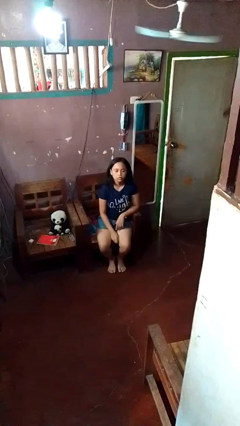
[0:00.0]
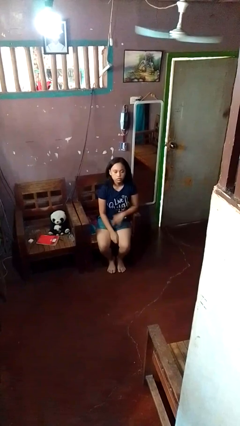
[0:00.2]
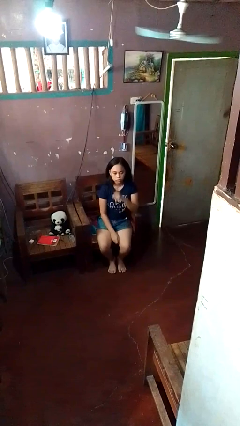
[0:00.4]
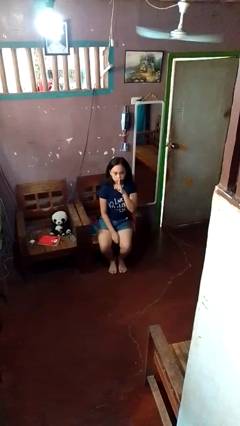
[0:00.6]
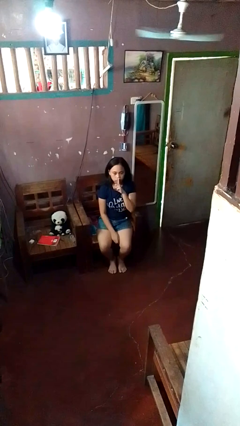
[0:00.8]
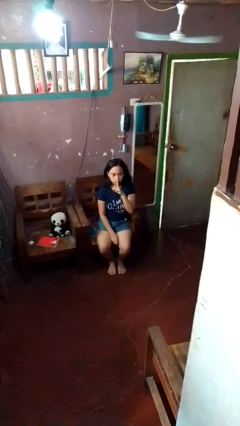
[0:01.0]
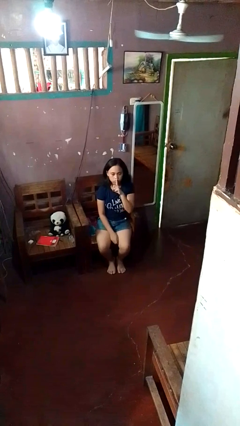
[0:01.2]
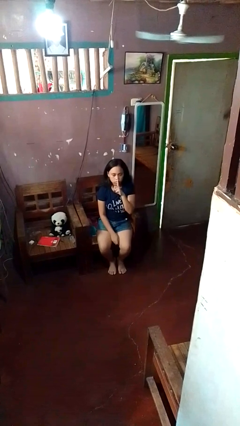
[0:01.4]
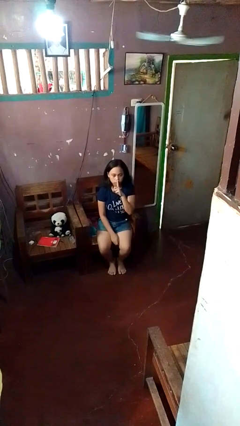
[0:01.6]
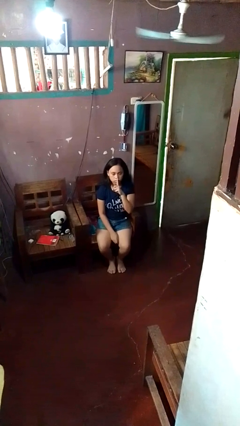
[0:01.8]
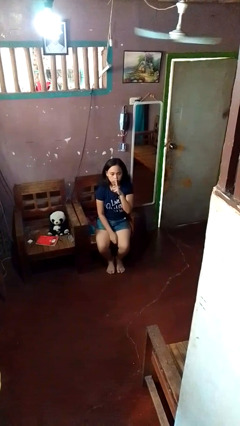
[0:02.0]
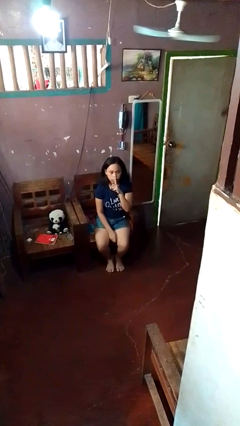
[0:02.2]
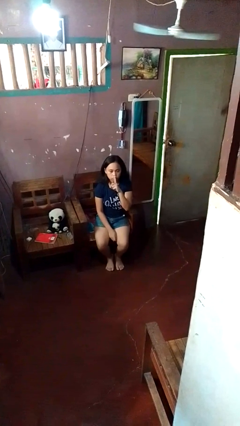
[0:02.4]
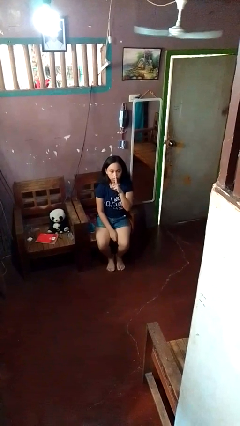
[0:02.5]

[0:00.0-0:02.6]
person gestures be quiet

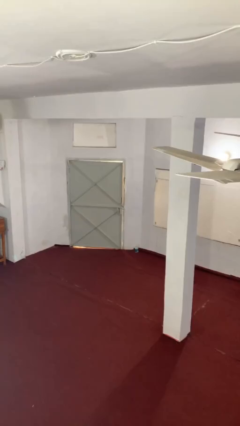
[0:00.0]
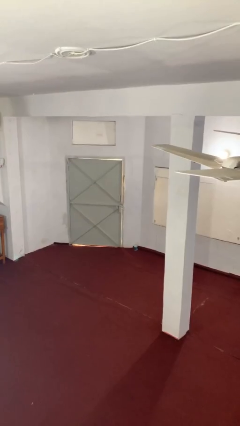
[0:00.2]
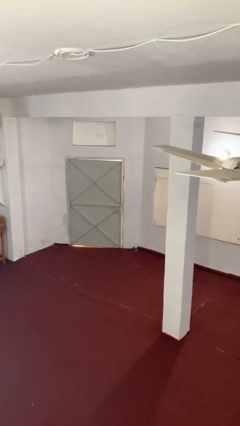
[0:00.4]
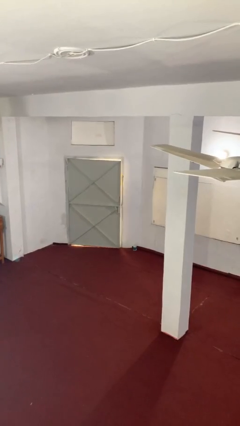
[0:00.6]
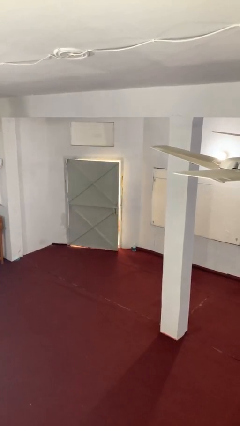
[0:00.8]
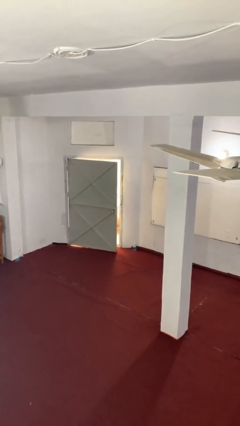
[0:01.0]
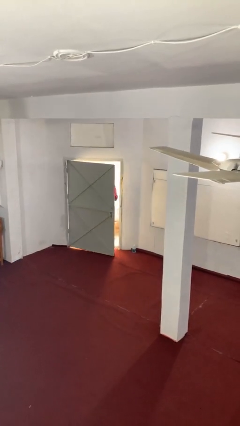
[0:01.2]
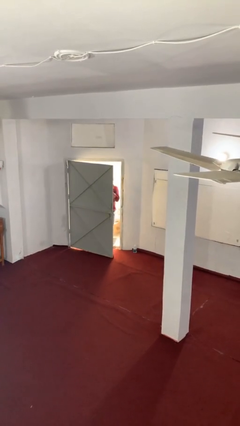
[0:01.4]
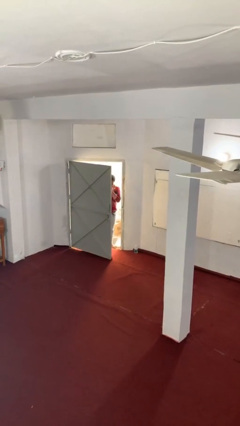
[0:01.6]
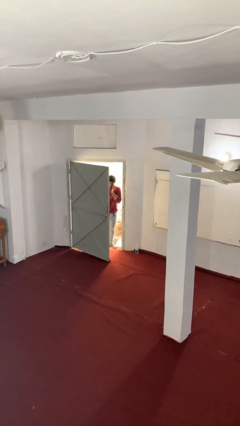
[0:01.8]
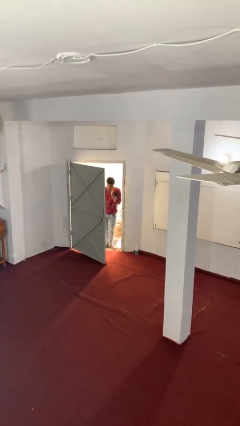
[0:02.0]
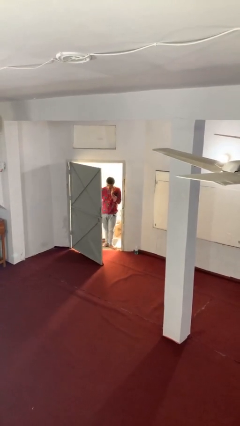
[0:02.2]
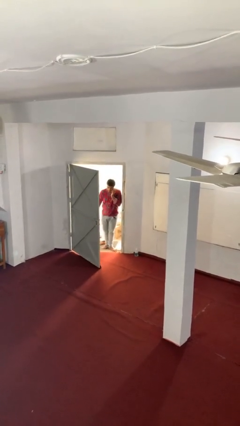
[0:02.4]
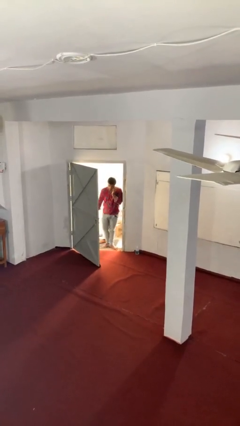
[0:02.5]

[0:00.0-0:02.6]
person opens facility door

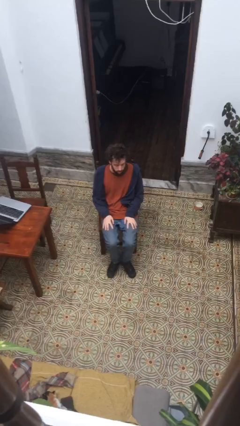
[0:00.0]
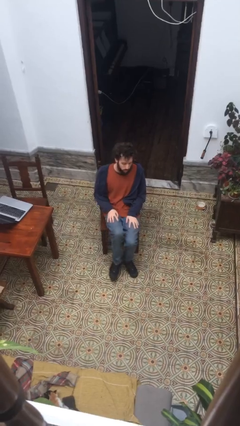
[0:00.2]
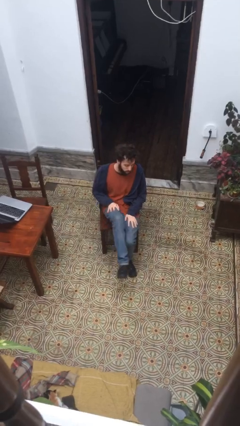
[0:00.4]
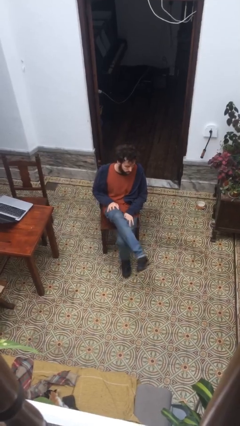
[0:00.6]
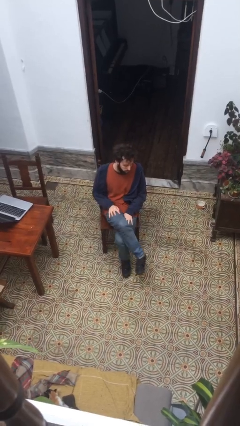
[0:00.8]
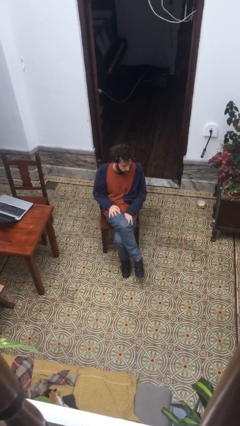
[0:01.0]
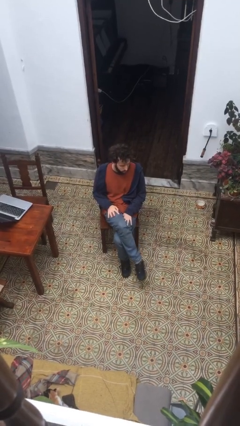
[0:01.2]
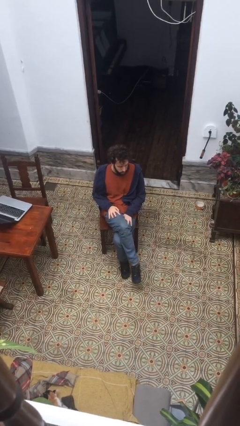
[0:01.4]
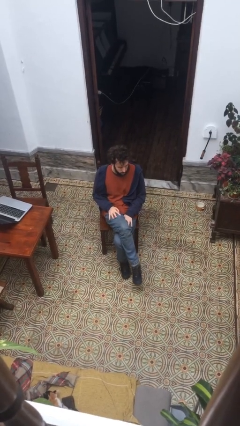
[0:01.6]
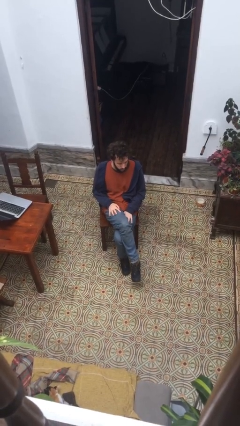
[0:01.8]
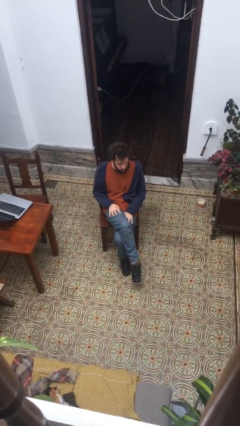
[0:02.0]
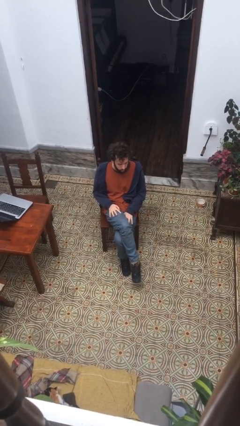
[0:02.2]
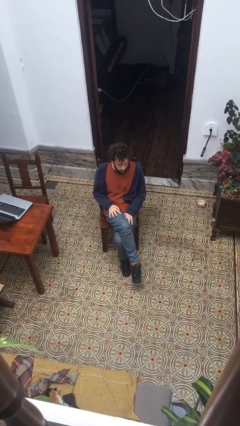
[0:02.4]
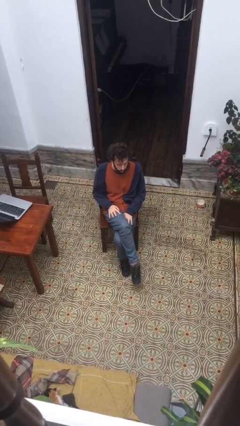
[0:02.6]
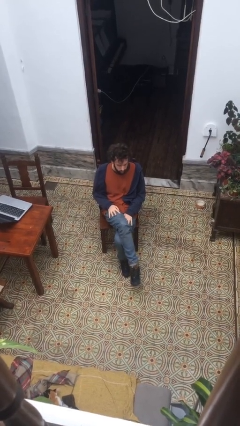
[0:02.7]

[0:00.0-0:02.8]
person crosses legs

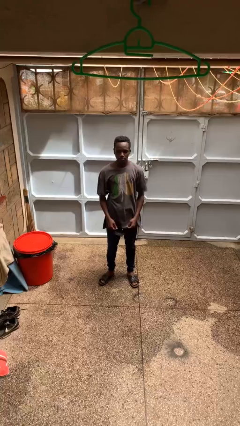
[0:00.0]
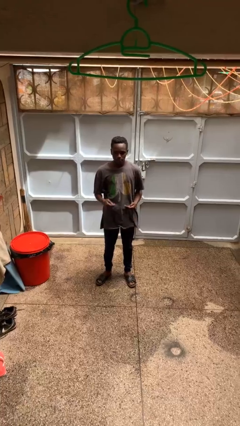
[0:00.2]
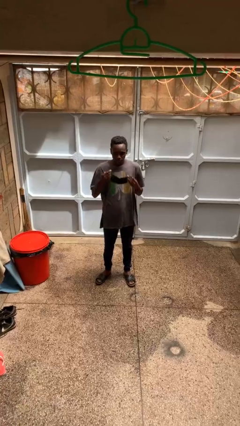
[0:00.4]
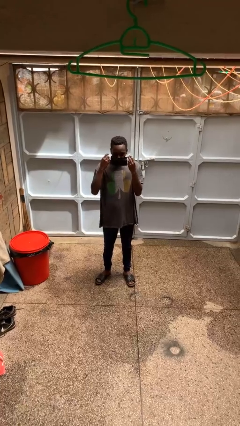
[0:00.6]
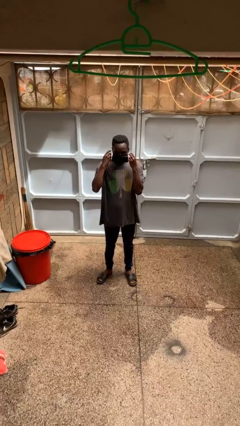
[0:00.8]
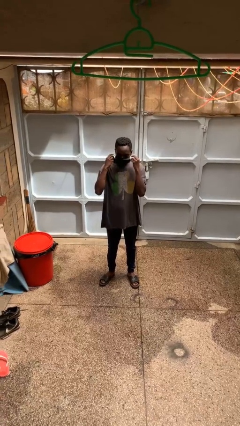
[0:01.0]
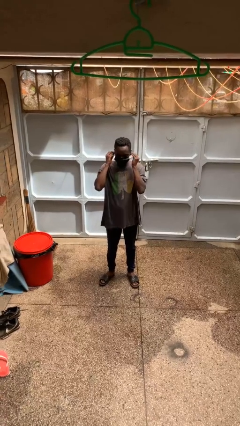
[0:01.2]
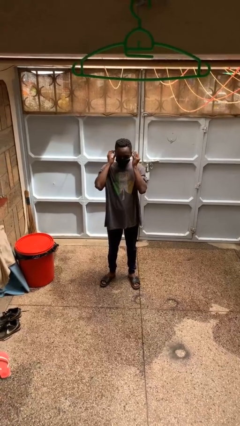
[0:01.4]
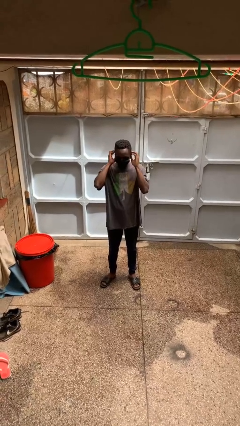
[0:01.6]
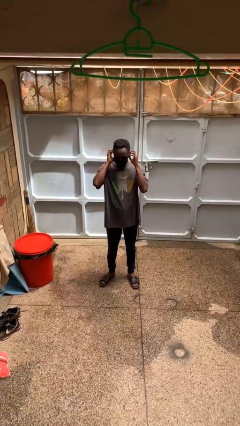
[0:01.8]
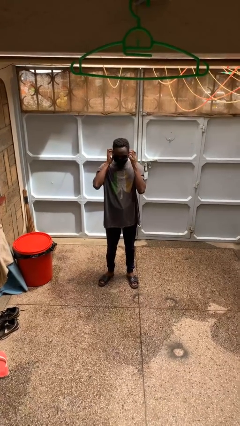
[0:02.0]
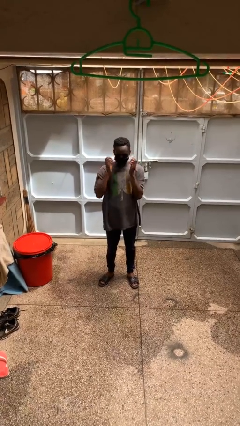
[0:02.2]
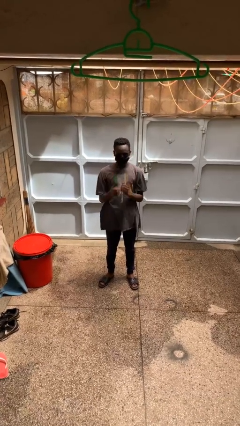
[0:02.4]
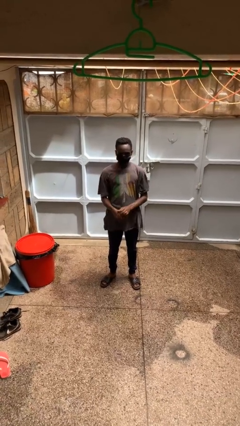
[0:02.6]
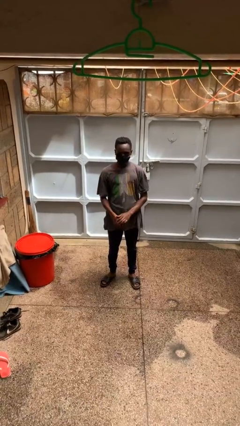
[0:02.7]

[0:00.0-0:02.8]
person puts on facemask

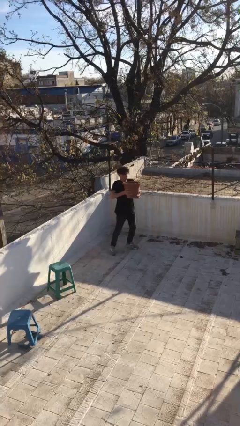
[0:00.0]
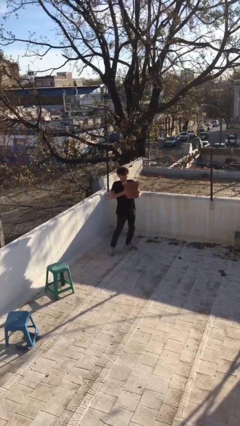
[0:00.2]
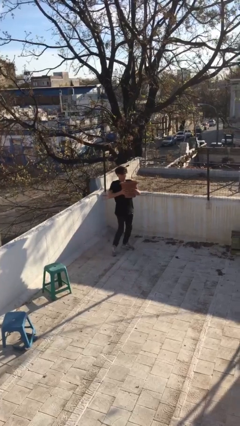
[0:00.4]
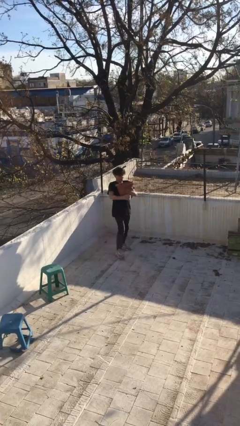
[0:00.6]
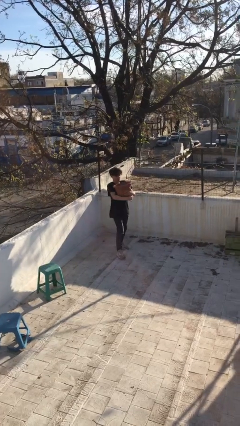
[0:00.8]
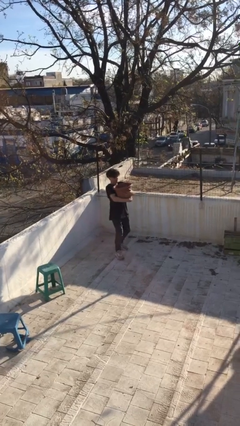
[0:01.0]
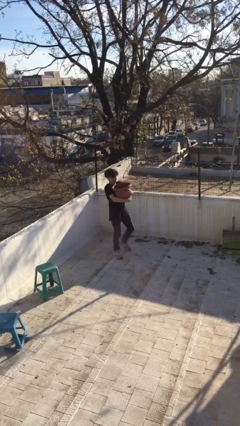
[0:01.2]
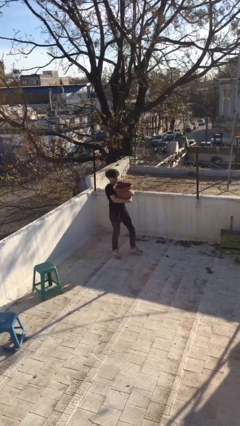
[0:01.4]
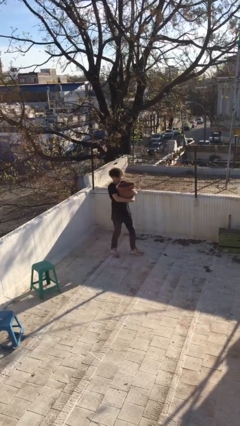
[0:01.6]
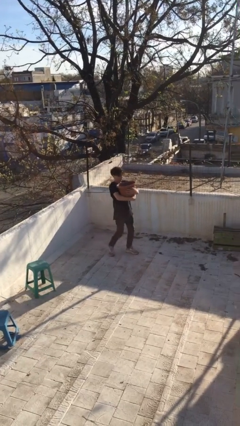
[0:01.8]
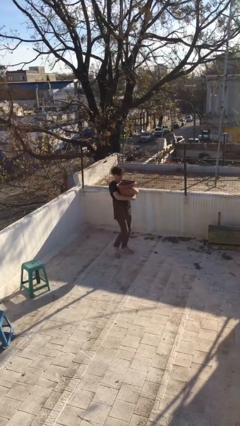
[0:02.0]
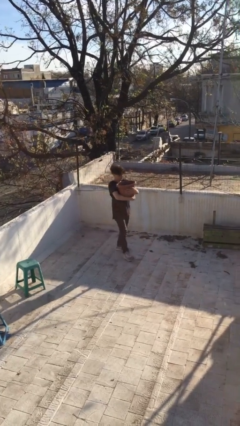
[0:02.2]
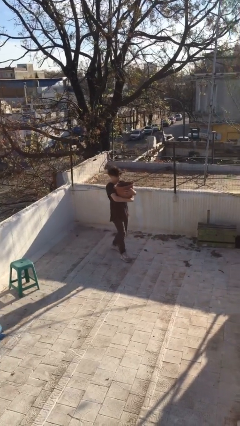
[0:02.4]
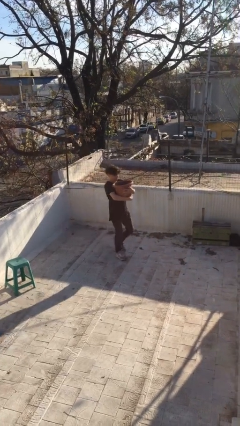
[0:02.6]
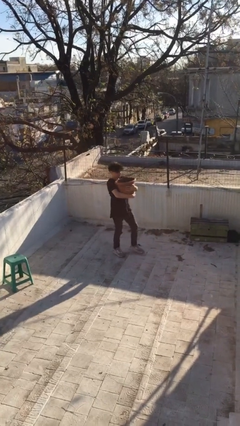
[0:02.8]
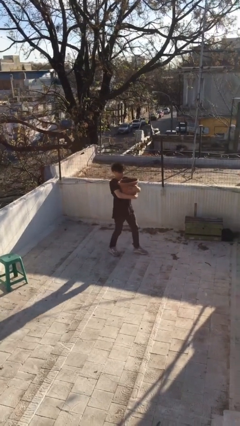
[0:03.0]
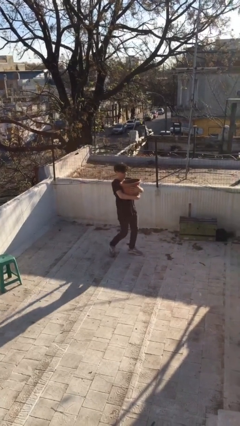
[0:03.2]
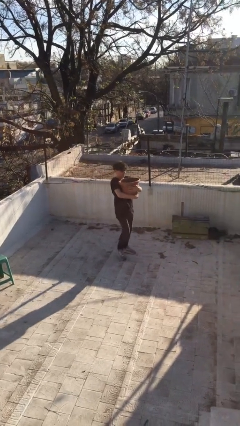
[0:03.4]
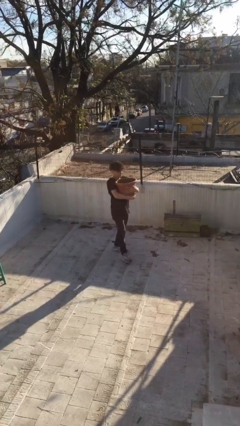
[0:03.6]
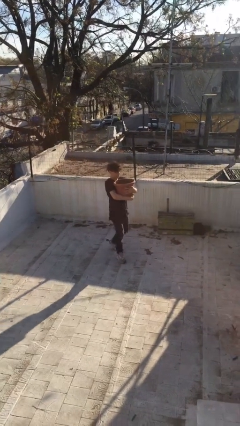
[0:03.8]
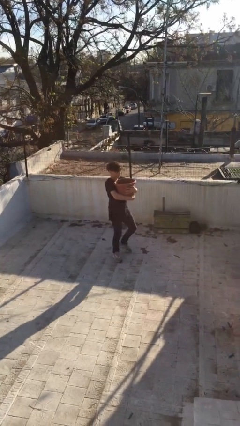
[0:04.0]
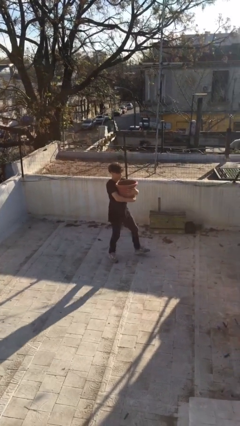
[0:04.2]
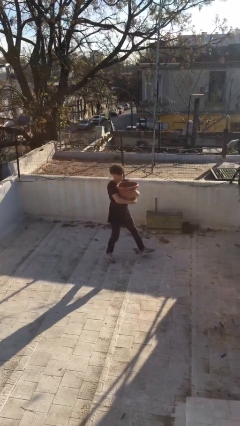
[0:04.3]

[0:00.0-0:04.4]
person carries heavy object

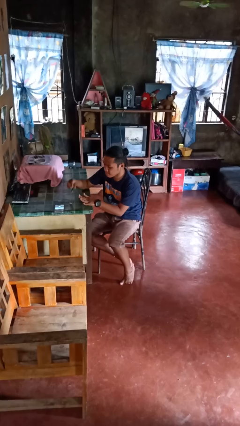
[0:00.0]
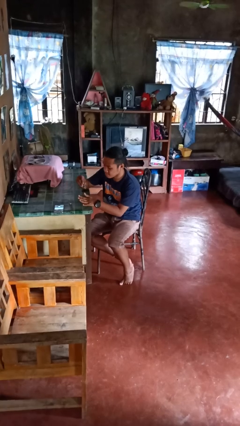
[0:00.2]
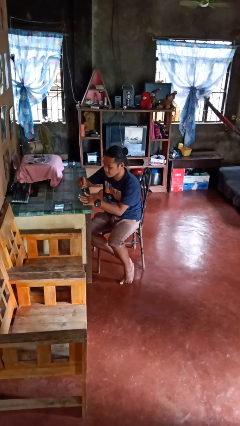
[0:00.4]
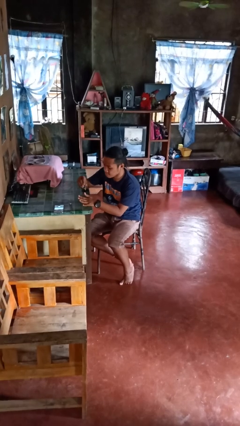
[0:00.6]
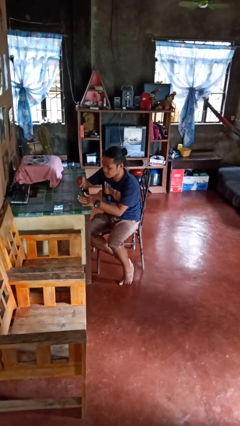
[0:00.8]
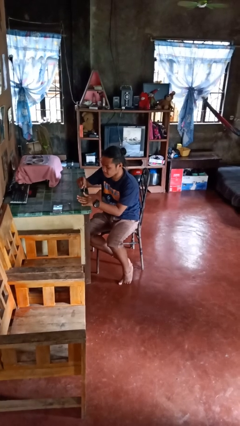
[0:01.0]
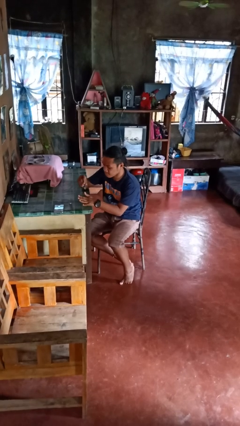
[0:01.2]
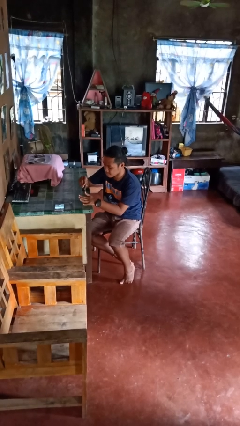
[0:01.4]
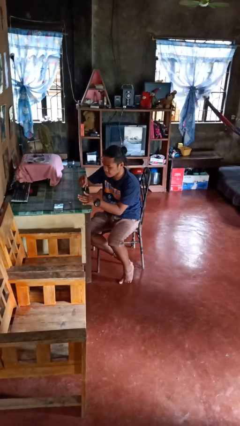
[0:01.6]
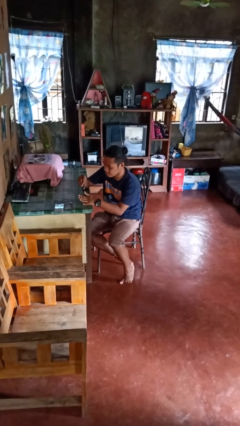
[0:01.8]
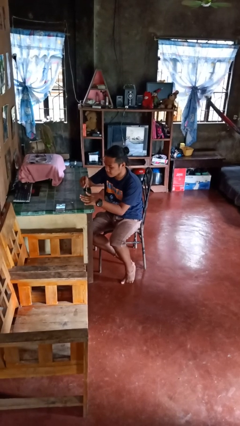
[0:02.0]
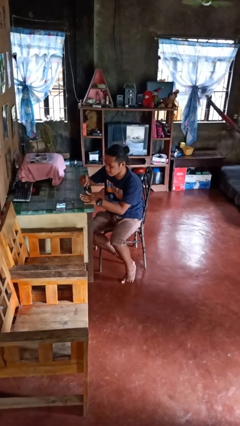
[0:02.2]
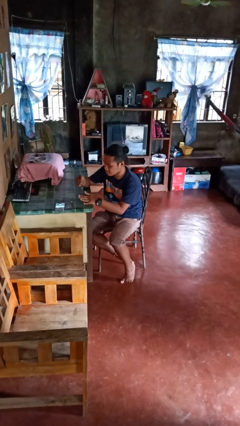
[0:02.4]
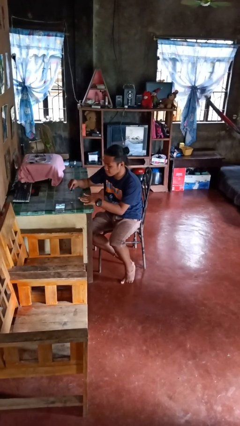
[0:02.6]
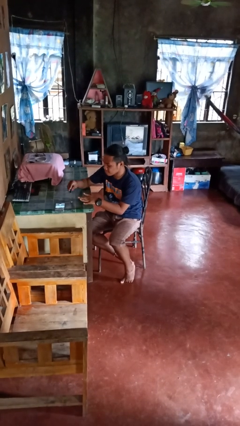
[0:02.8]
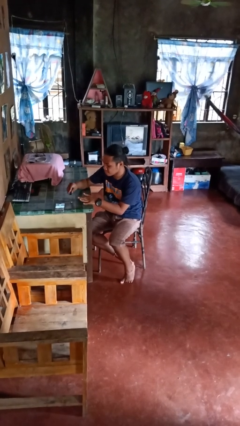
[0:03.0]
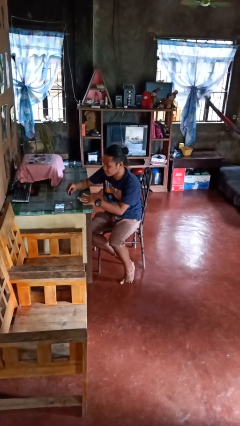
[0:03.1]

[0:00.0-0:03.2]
person paints fingernails
